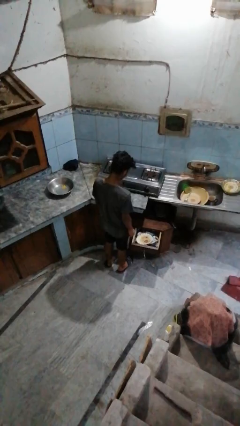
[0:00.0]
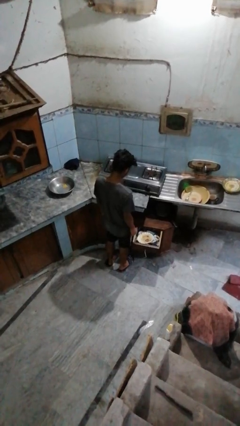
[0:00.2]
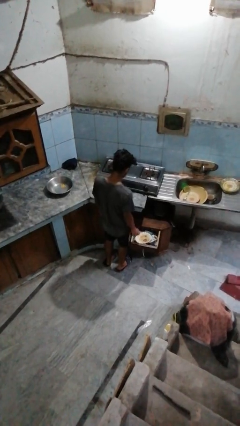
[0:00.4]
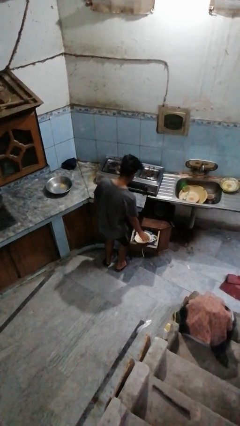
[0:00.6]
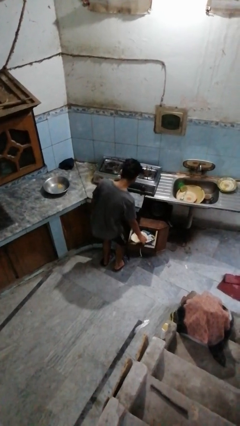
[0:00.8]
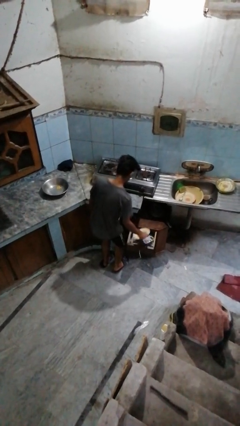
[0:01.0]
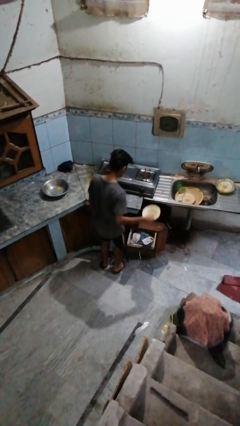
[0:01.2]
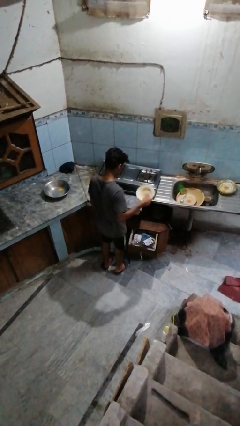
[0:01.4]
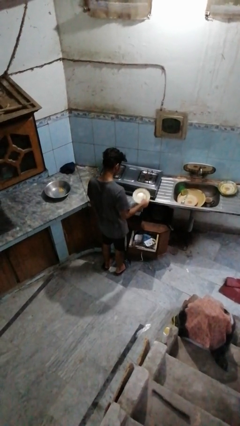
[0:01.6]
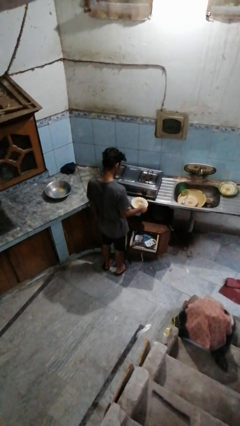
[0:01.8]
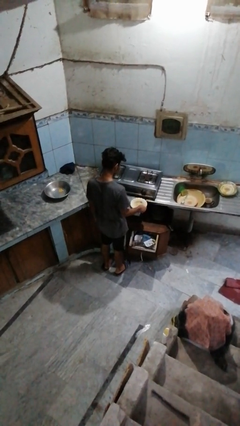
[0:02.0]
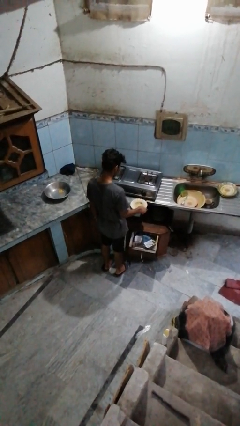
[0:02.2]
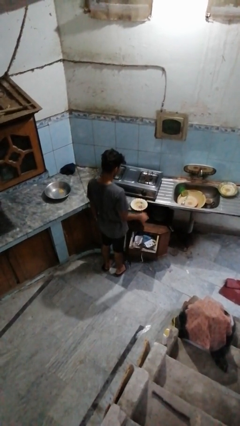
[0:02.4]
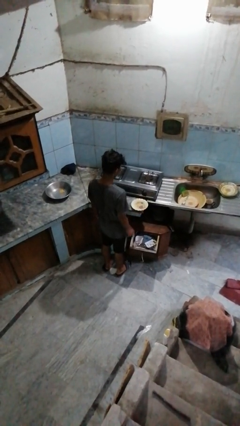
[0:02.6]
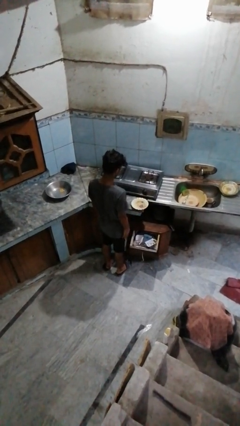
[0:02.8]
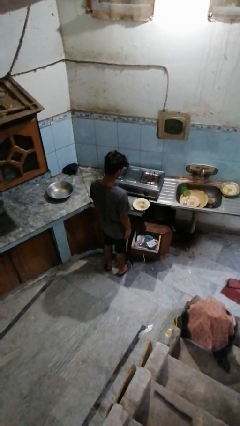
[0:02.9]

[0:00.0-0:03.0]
person takes object from kitchen drawer

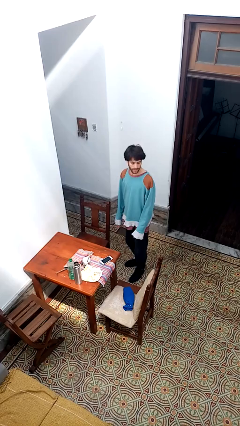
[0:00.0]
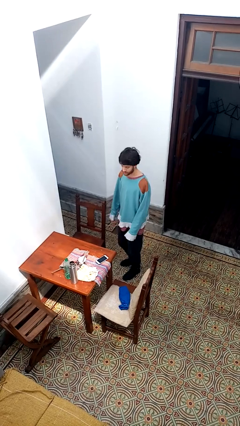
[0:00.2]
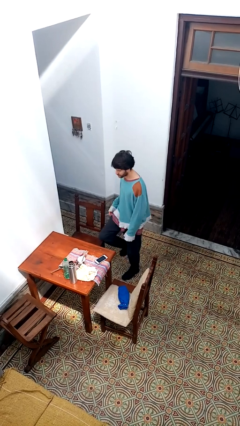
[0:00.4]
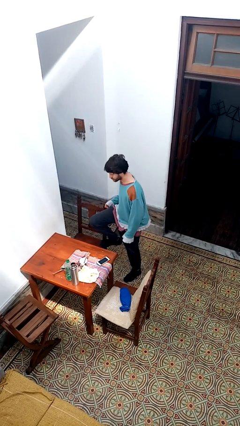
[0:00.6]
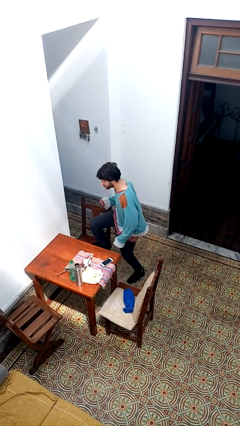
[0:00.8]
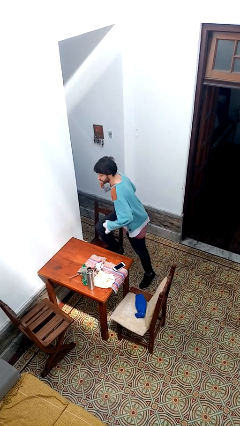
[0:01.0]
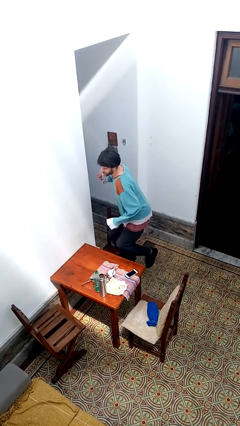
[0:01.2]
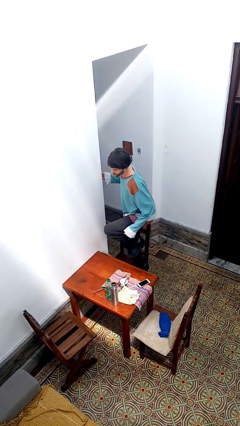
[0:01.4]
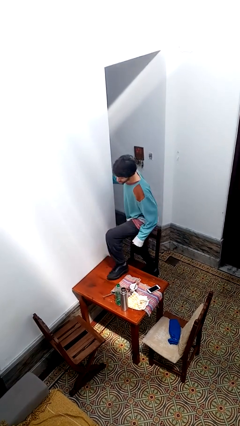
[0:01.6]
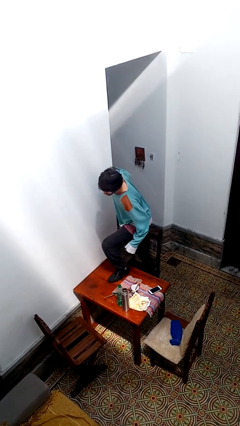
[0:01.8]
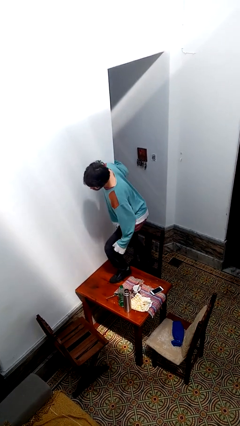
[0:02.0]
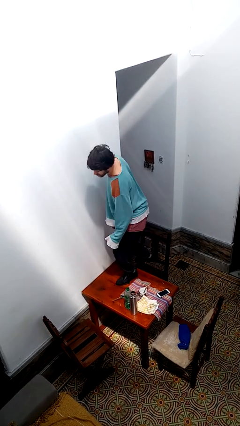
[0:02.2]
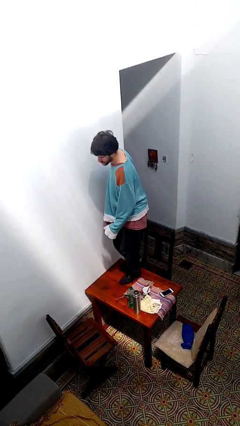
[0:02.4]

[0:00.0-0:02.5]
person climbs on table

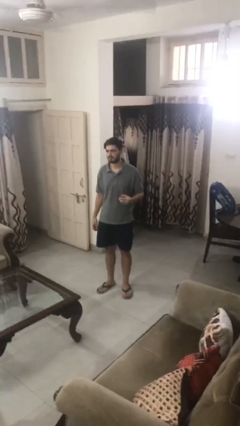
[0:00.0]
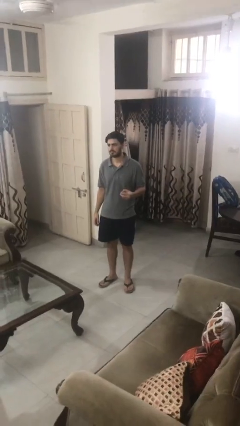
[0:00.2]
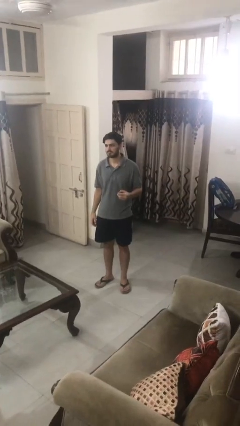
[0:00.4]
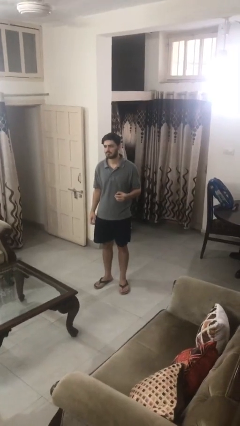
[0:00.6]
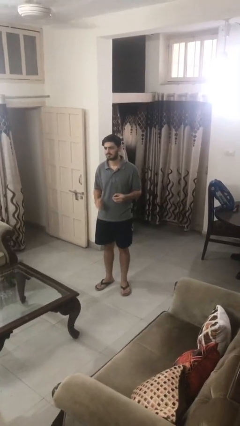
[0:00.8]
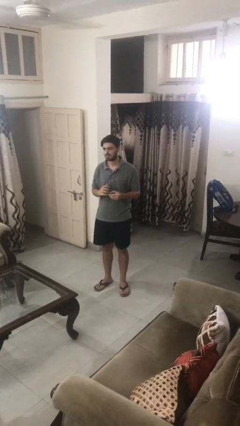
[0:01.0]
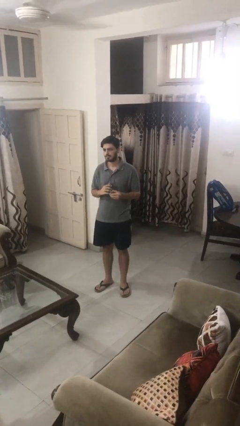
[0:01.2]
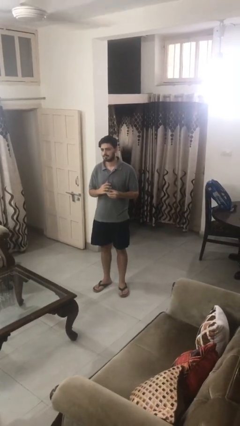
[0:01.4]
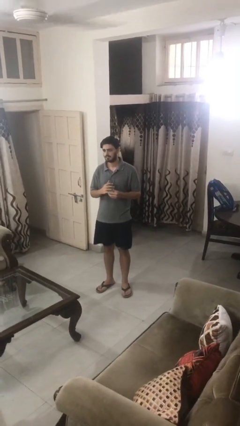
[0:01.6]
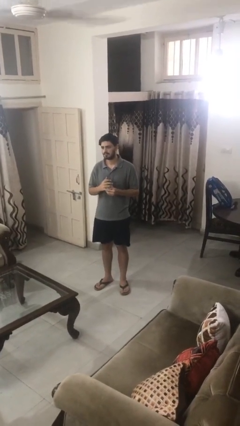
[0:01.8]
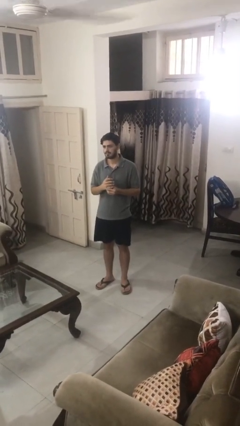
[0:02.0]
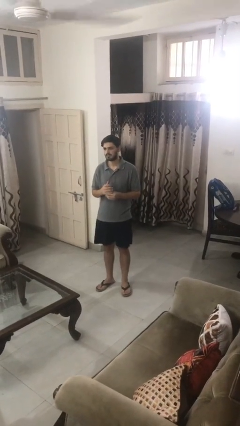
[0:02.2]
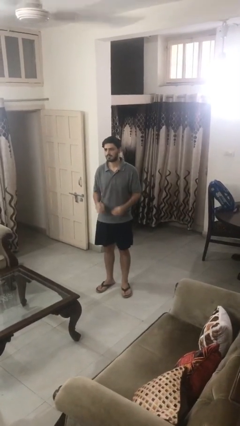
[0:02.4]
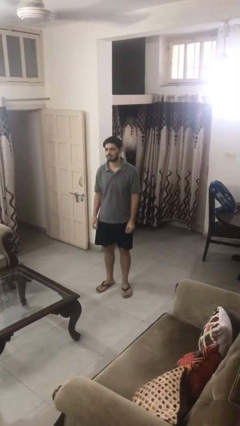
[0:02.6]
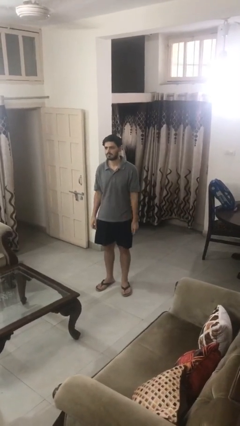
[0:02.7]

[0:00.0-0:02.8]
person puts on ring

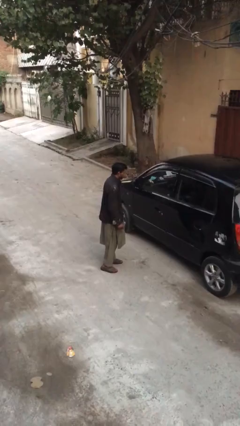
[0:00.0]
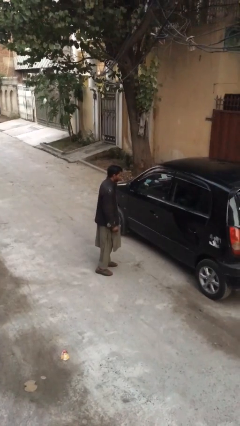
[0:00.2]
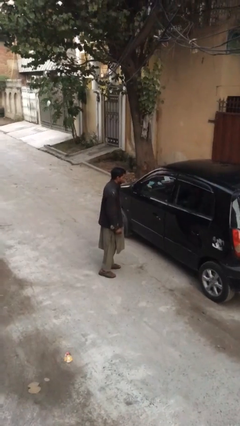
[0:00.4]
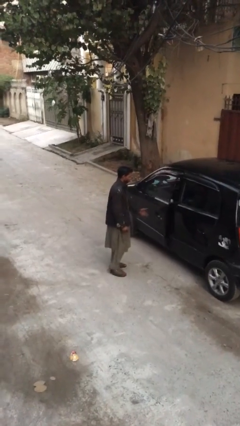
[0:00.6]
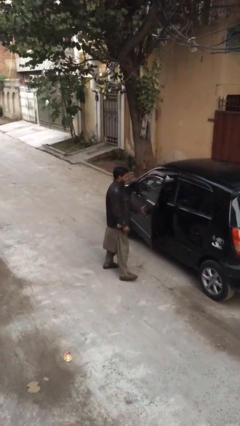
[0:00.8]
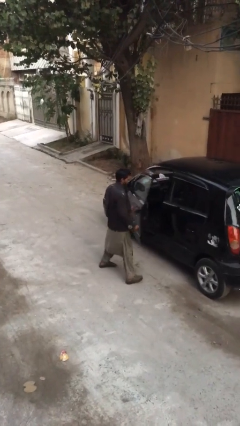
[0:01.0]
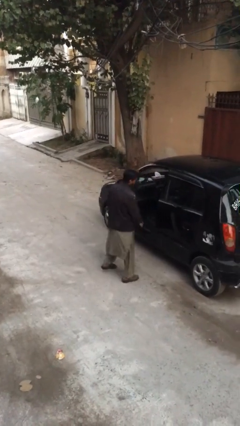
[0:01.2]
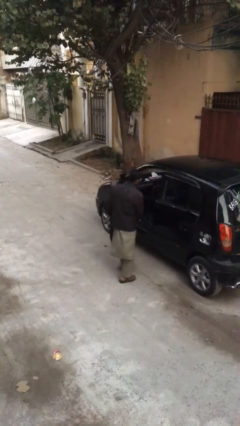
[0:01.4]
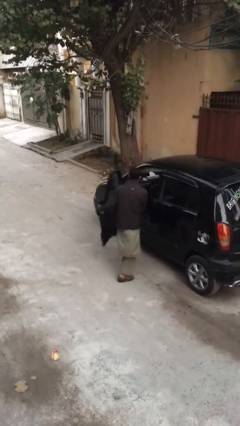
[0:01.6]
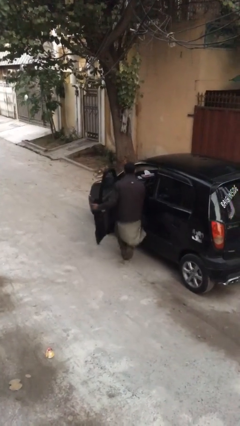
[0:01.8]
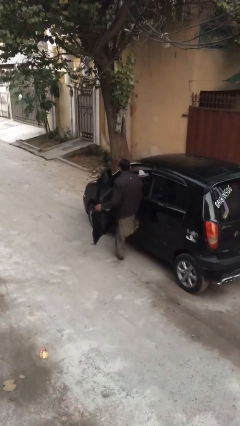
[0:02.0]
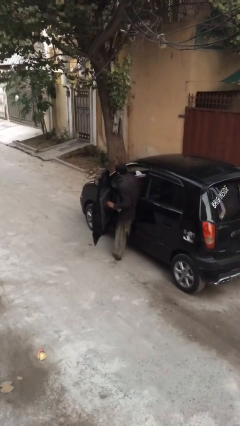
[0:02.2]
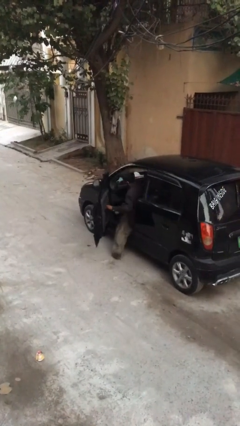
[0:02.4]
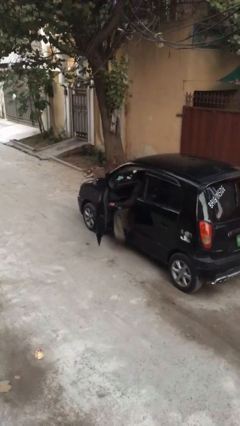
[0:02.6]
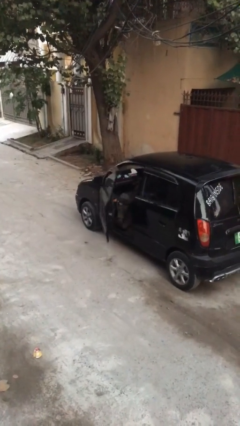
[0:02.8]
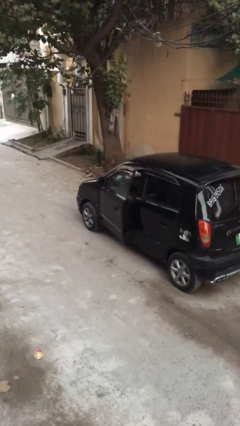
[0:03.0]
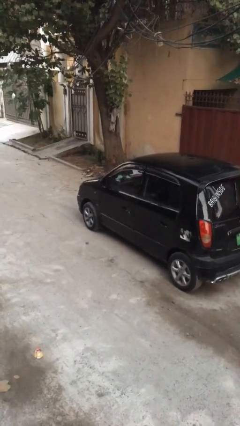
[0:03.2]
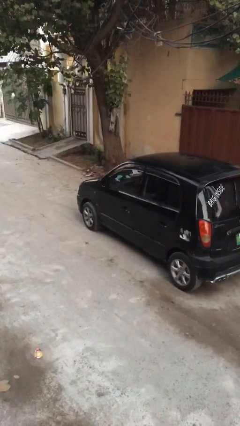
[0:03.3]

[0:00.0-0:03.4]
car picks up person

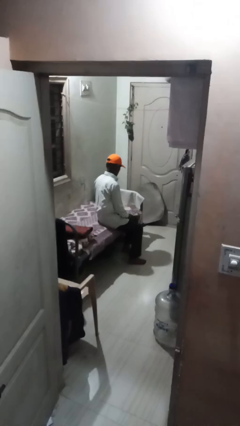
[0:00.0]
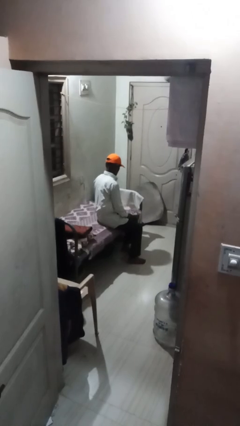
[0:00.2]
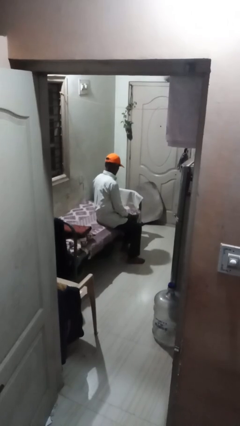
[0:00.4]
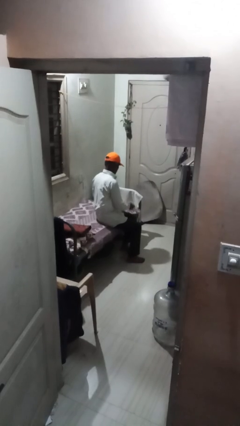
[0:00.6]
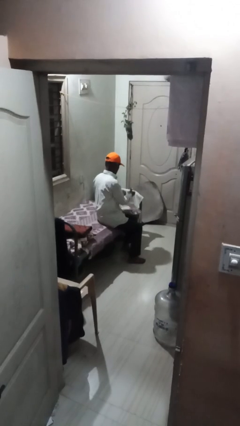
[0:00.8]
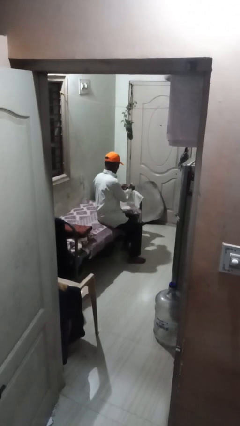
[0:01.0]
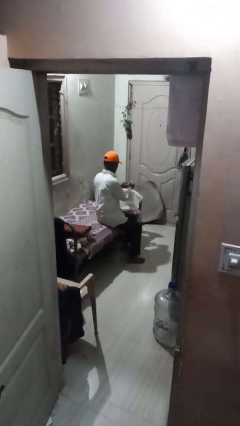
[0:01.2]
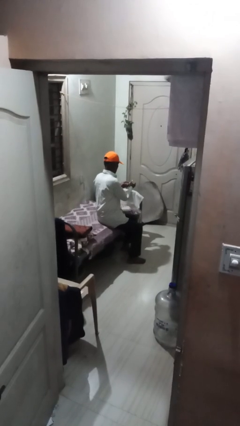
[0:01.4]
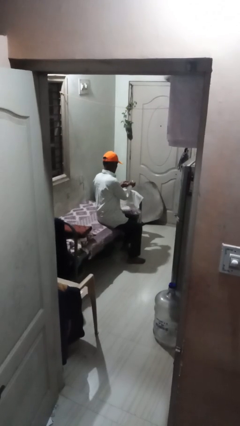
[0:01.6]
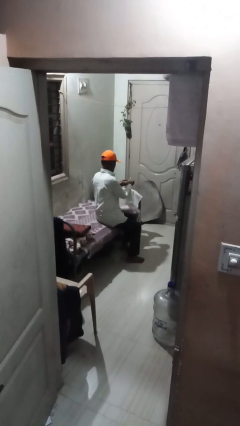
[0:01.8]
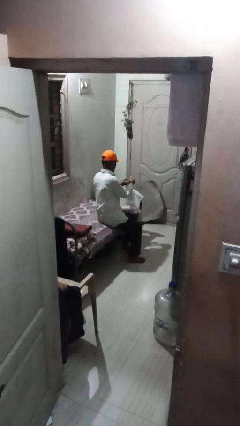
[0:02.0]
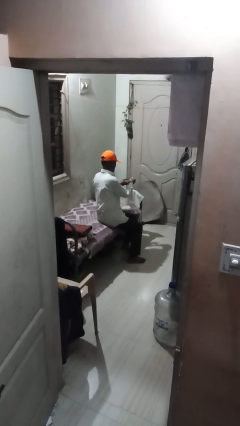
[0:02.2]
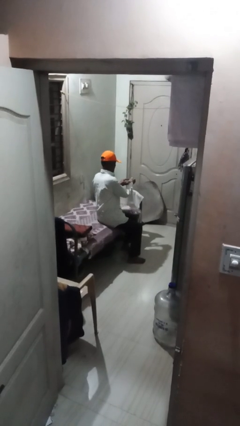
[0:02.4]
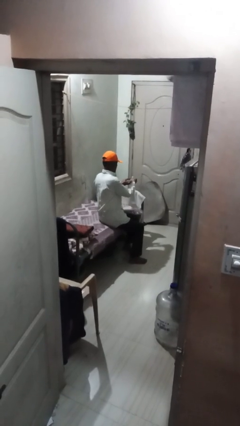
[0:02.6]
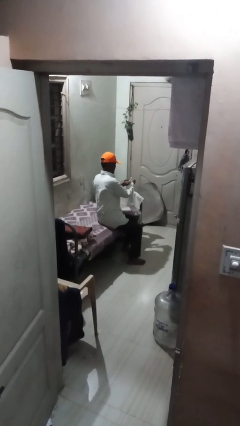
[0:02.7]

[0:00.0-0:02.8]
person clips fingernails

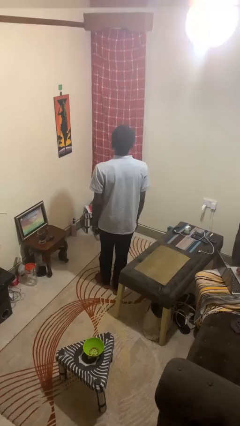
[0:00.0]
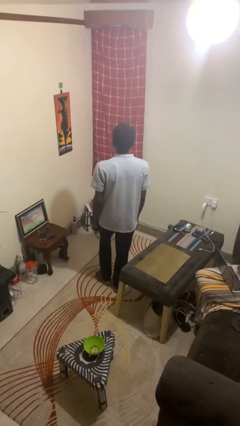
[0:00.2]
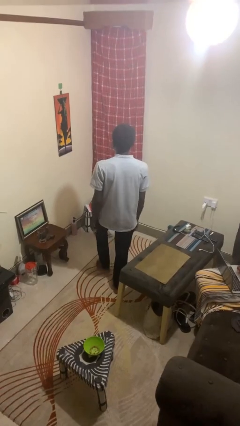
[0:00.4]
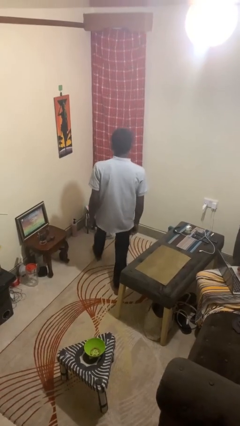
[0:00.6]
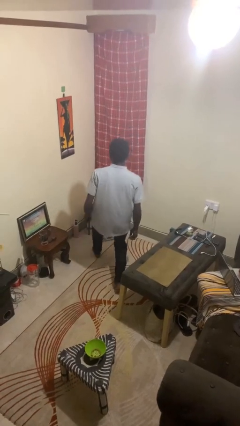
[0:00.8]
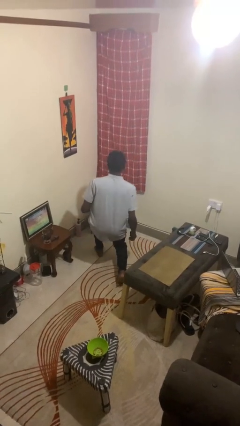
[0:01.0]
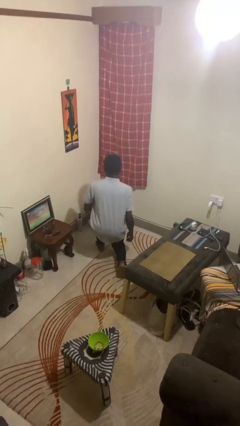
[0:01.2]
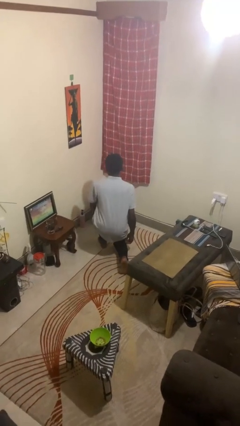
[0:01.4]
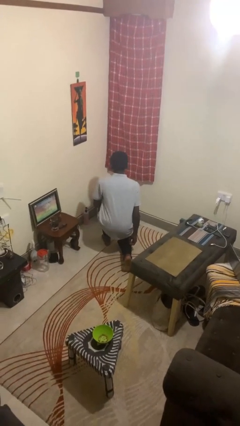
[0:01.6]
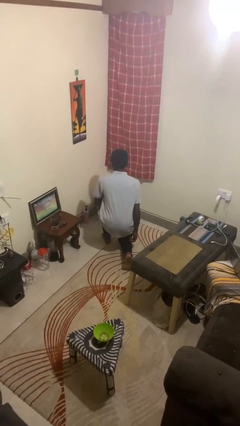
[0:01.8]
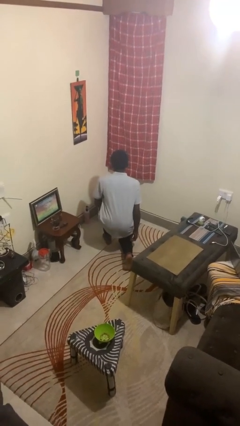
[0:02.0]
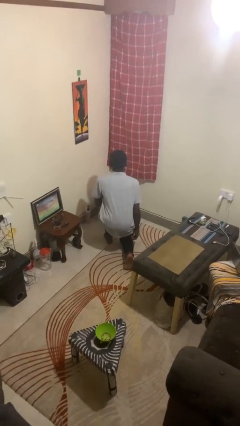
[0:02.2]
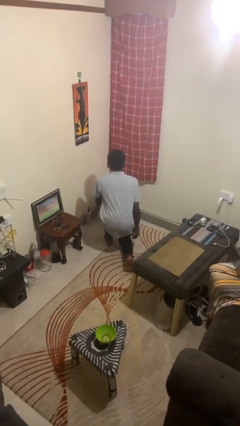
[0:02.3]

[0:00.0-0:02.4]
person exercises with lunges

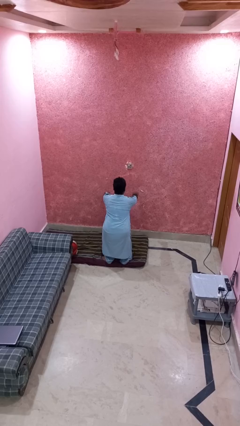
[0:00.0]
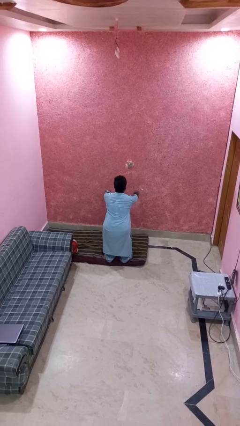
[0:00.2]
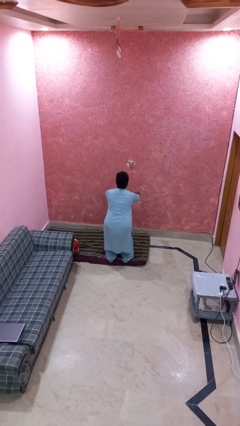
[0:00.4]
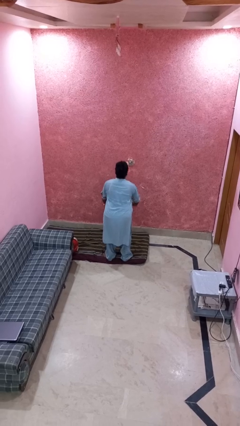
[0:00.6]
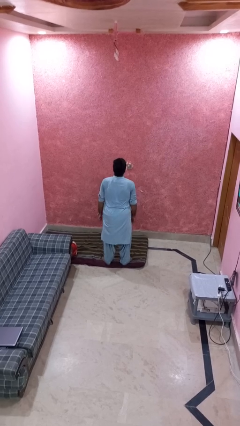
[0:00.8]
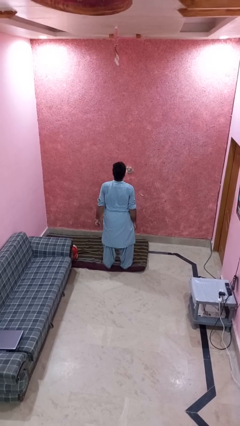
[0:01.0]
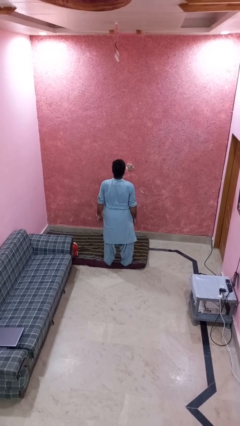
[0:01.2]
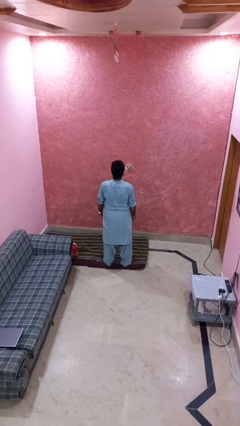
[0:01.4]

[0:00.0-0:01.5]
person stands up
